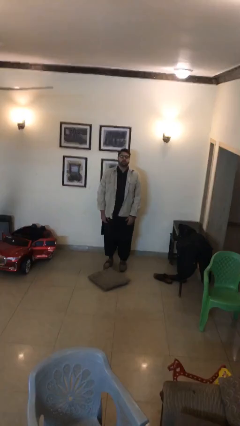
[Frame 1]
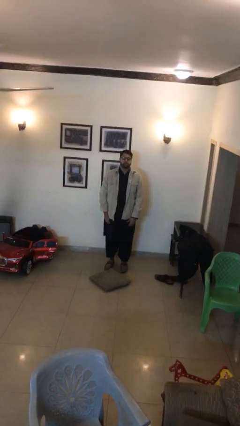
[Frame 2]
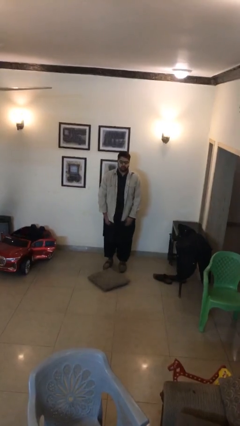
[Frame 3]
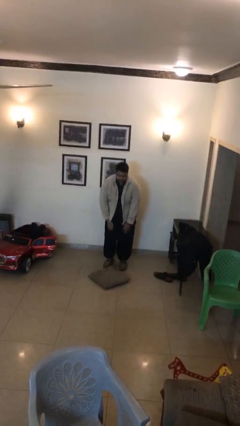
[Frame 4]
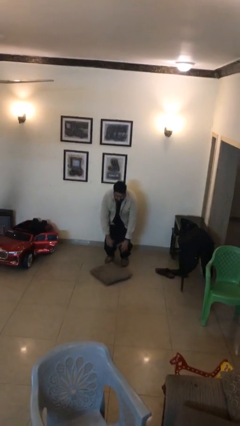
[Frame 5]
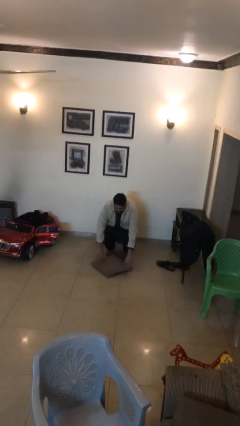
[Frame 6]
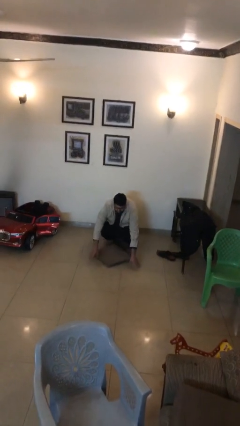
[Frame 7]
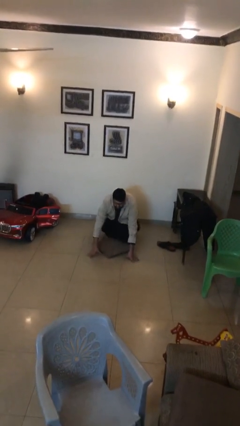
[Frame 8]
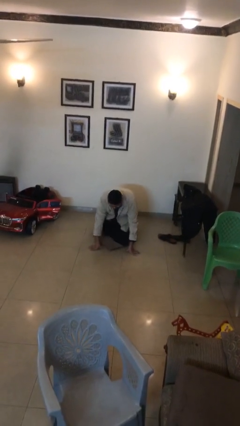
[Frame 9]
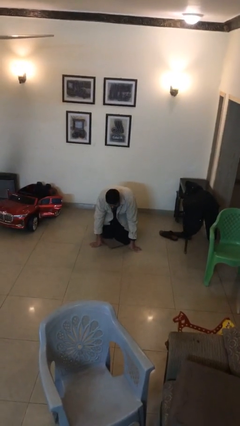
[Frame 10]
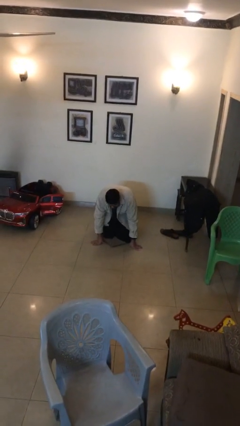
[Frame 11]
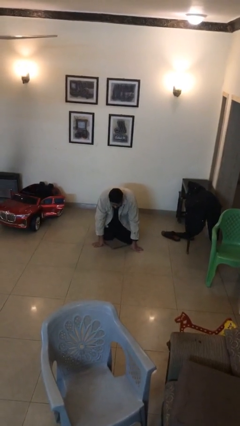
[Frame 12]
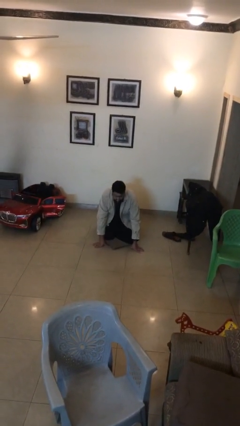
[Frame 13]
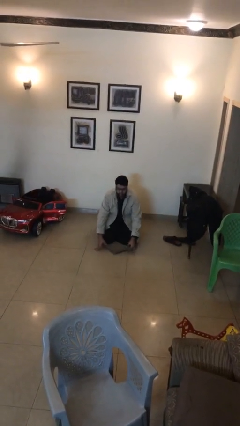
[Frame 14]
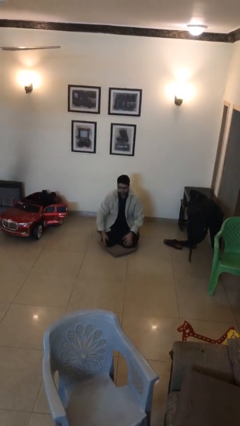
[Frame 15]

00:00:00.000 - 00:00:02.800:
person sits down

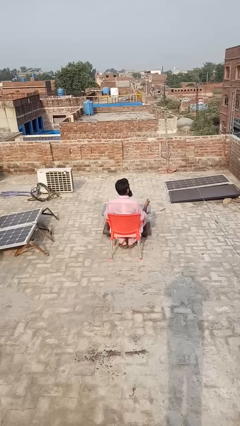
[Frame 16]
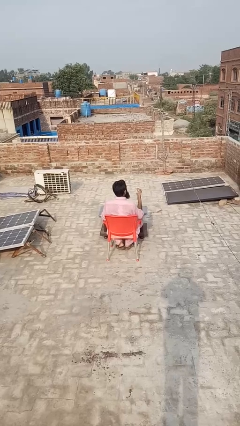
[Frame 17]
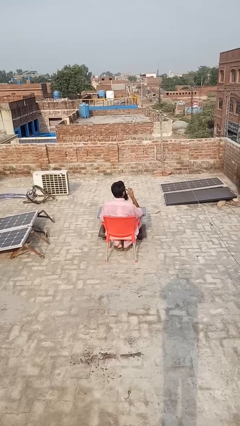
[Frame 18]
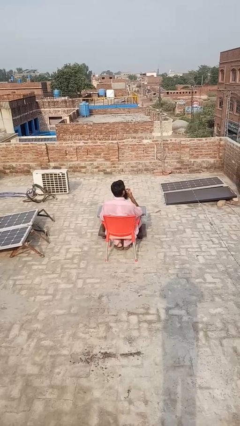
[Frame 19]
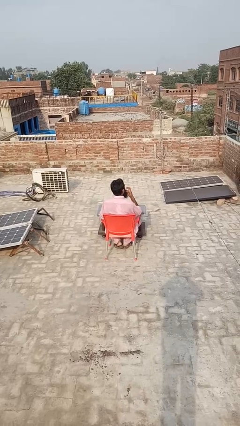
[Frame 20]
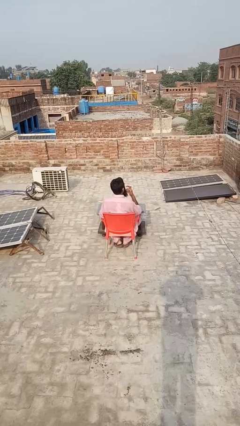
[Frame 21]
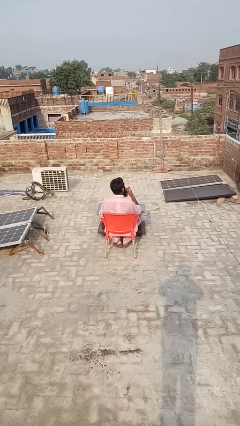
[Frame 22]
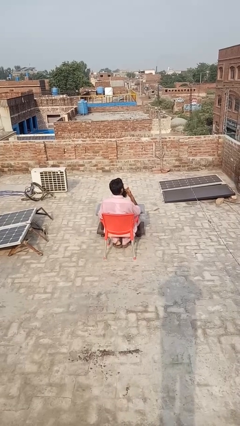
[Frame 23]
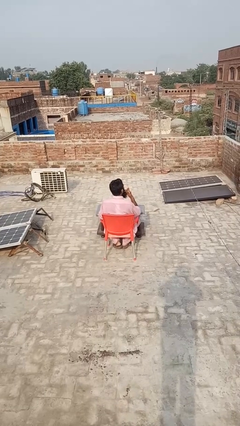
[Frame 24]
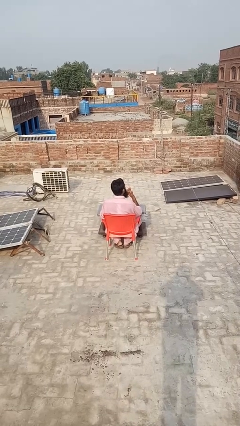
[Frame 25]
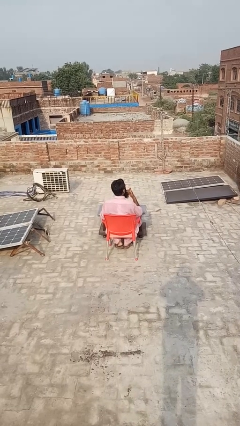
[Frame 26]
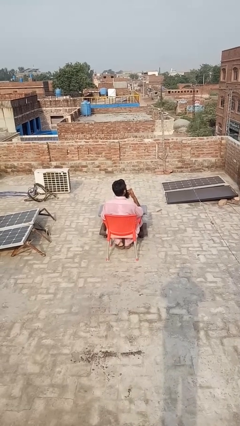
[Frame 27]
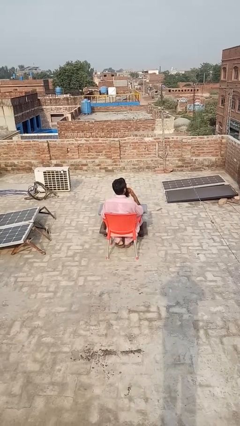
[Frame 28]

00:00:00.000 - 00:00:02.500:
person licks fingers

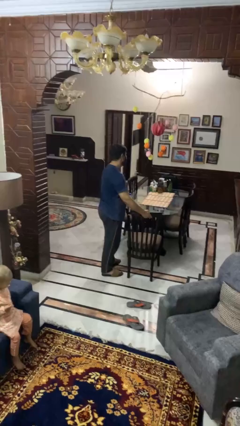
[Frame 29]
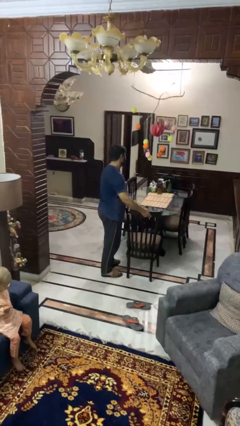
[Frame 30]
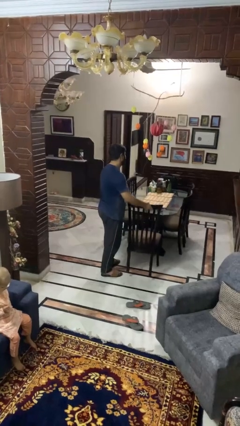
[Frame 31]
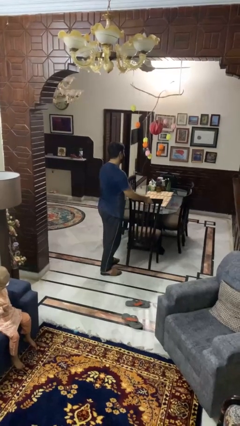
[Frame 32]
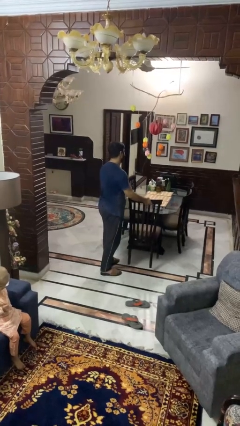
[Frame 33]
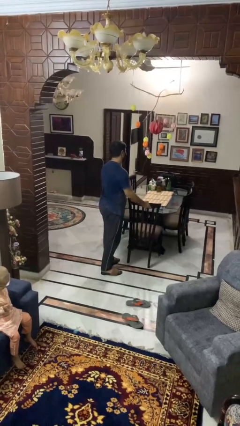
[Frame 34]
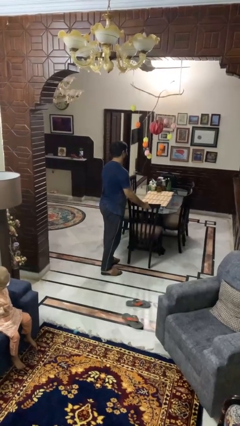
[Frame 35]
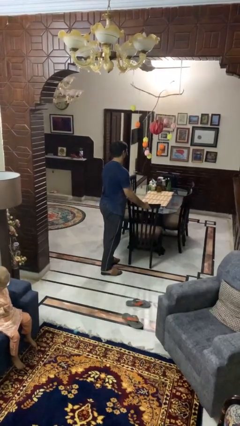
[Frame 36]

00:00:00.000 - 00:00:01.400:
person pushes in chair

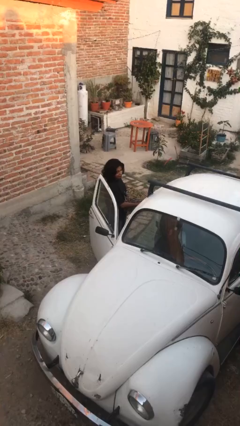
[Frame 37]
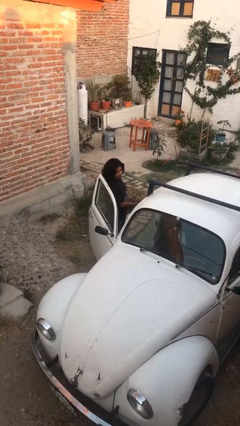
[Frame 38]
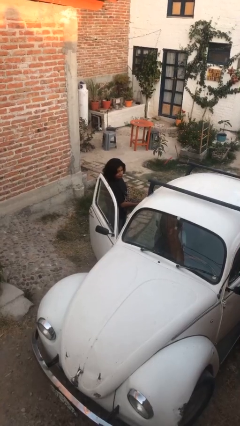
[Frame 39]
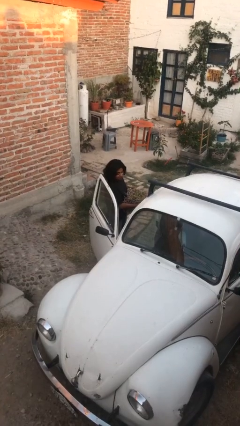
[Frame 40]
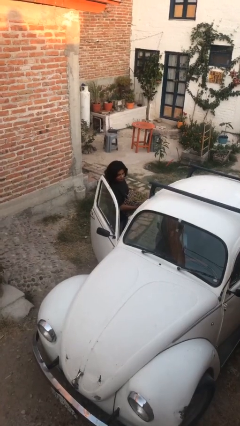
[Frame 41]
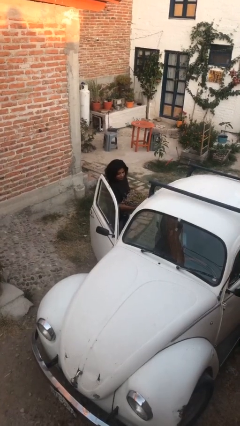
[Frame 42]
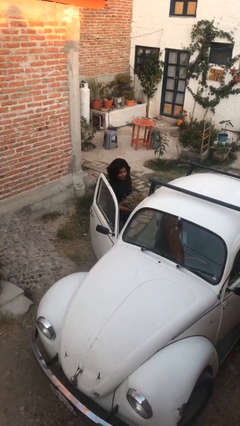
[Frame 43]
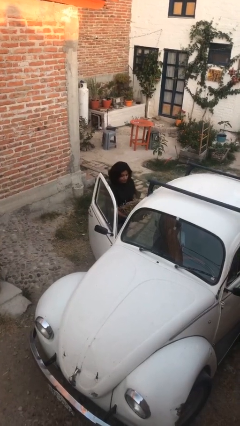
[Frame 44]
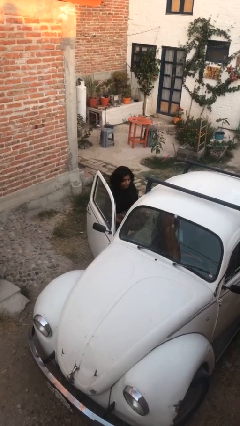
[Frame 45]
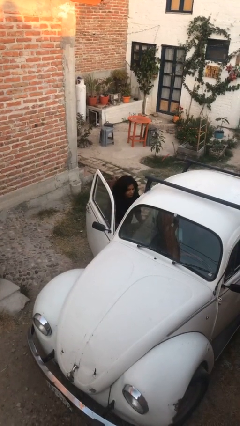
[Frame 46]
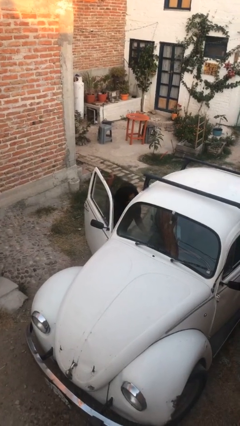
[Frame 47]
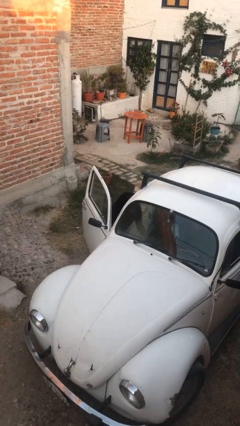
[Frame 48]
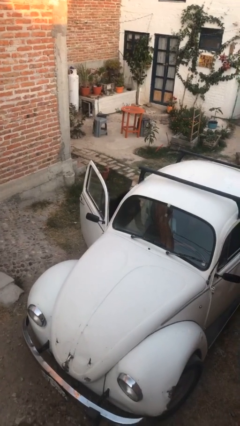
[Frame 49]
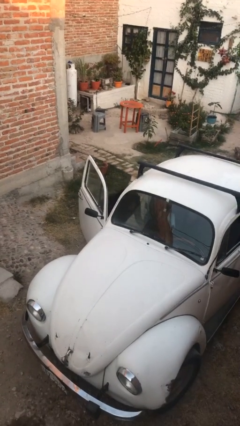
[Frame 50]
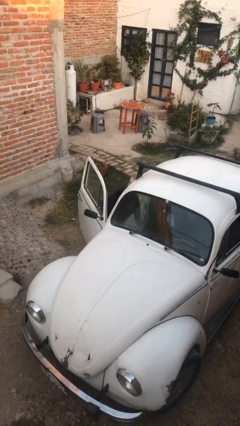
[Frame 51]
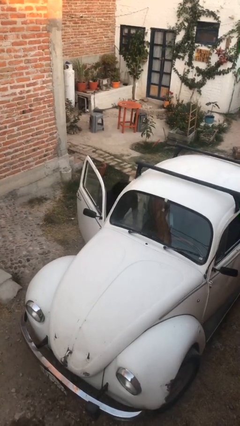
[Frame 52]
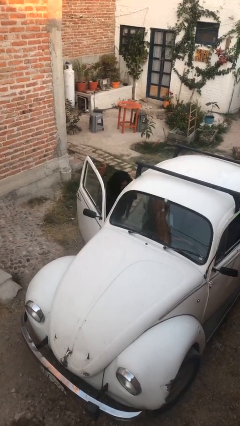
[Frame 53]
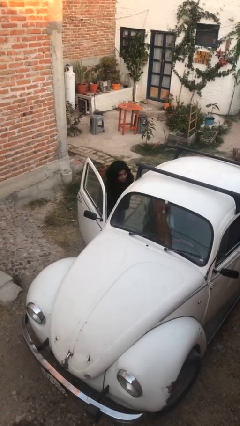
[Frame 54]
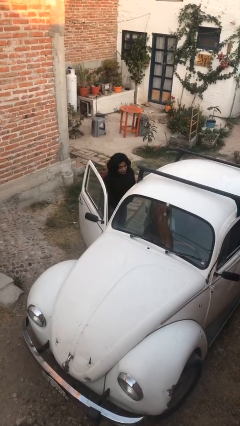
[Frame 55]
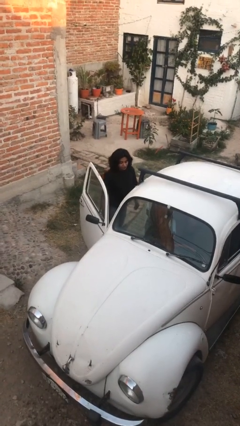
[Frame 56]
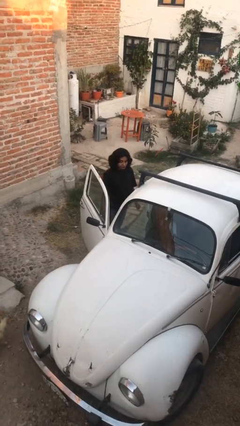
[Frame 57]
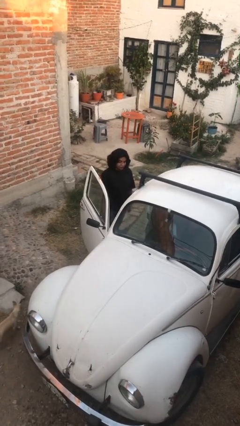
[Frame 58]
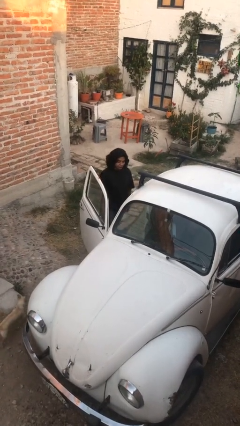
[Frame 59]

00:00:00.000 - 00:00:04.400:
person loads car

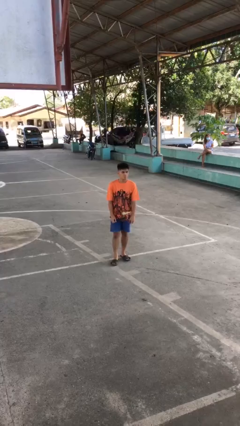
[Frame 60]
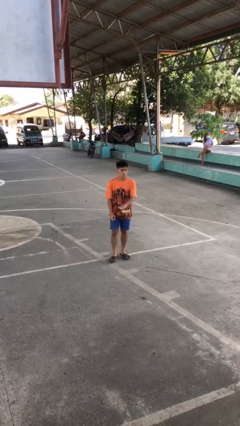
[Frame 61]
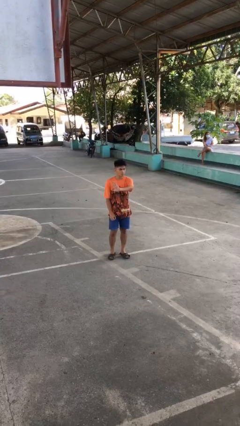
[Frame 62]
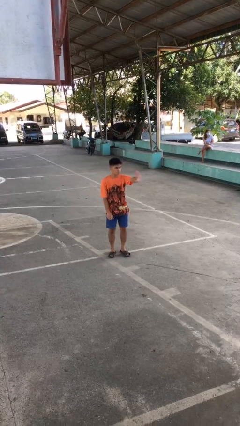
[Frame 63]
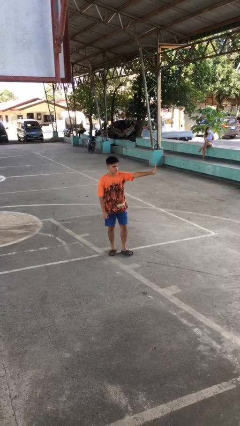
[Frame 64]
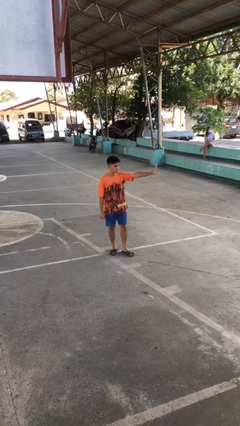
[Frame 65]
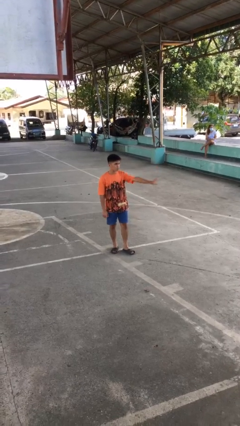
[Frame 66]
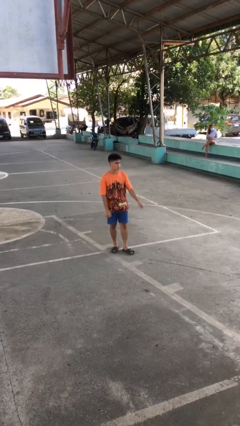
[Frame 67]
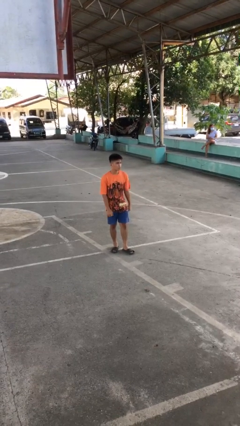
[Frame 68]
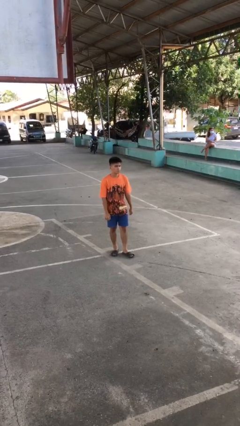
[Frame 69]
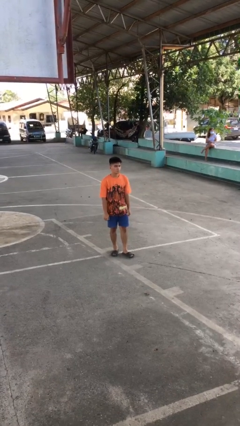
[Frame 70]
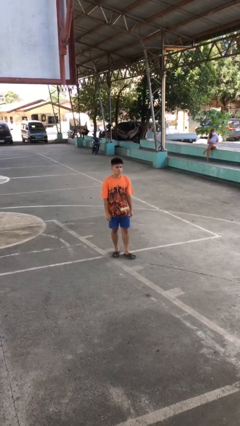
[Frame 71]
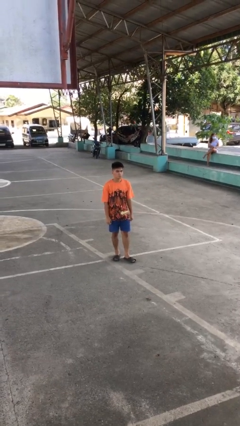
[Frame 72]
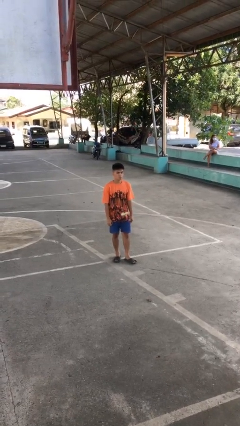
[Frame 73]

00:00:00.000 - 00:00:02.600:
person gestures swipe left

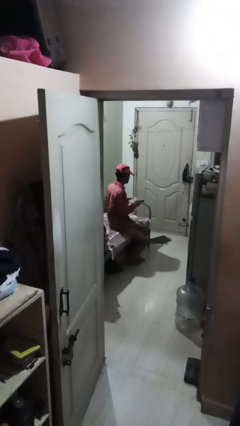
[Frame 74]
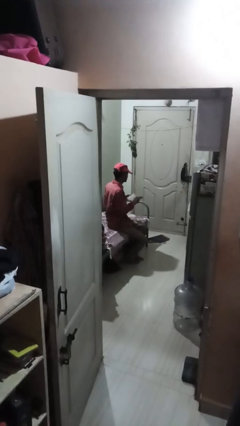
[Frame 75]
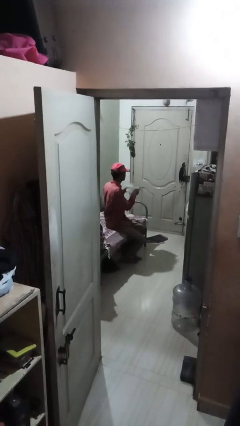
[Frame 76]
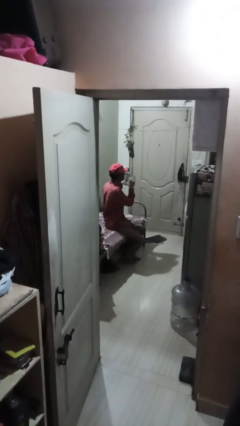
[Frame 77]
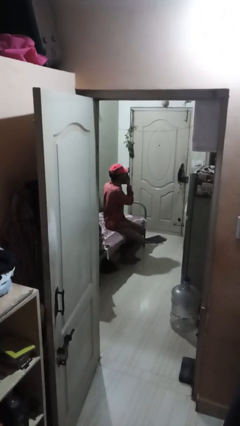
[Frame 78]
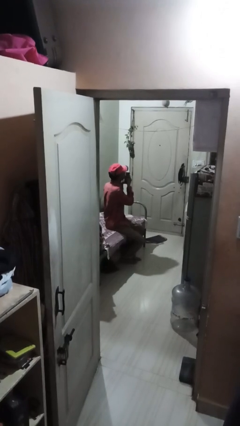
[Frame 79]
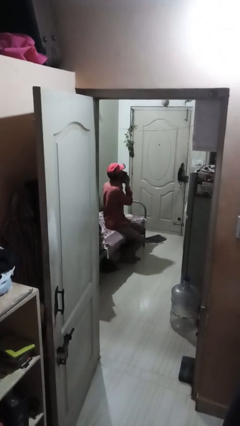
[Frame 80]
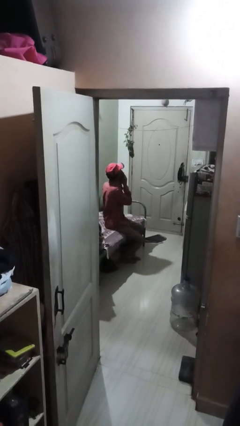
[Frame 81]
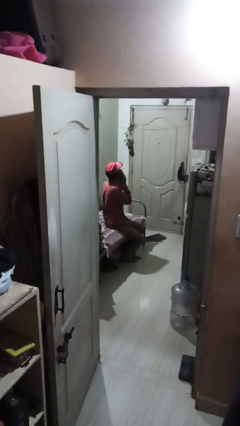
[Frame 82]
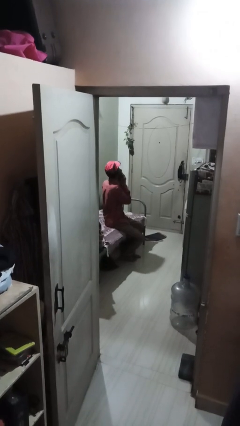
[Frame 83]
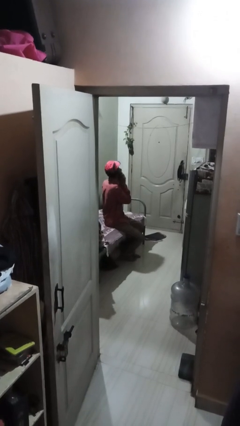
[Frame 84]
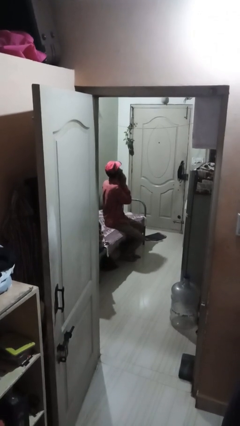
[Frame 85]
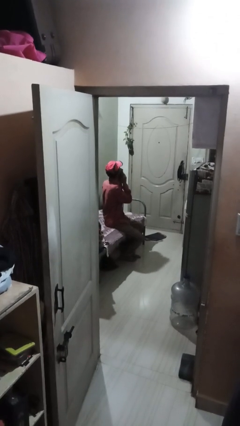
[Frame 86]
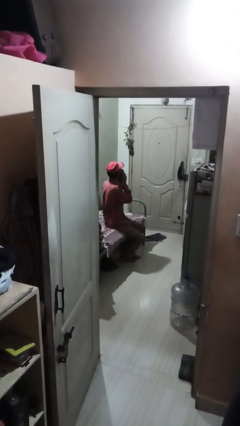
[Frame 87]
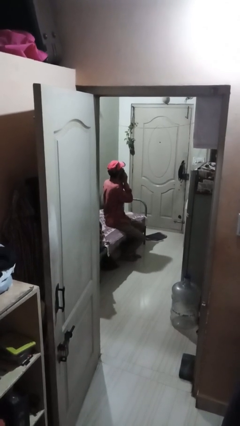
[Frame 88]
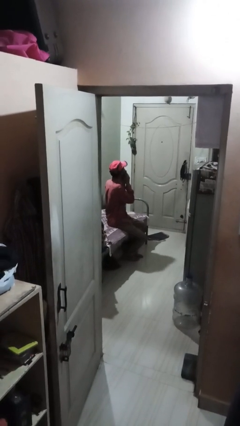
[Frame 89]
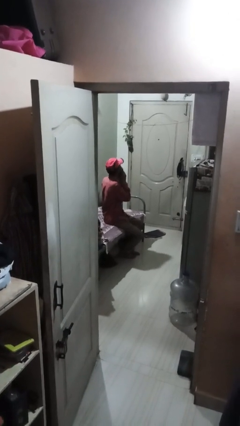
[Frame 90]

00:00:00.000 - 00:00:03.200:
person wipes mouth with napkin

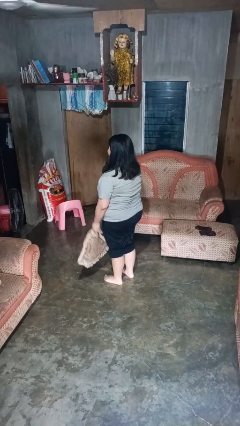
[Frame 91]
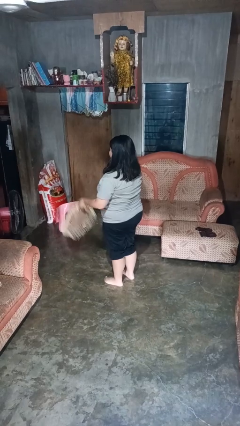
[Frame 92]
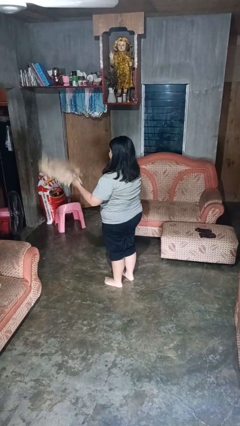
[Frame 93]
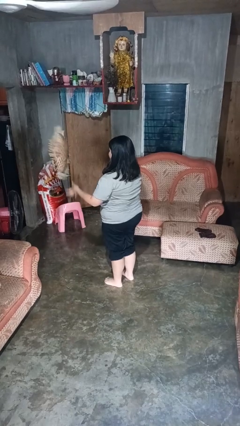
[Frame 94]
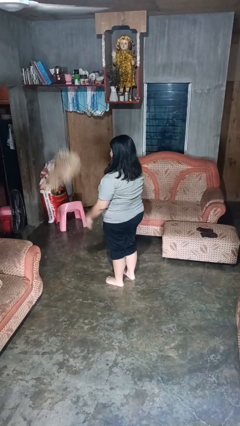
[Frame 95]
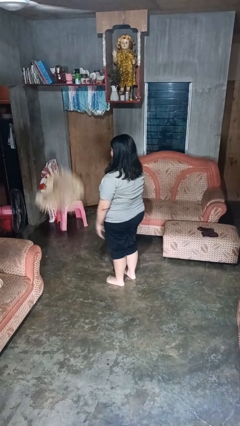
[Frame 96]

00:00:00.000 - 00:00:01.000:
person throws object into air
